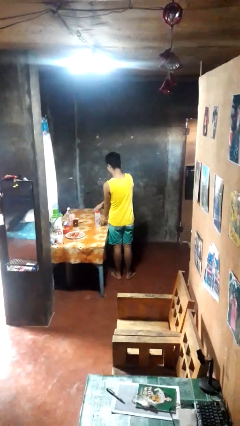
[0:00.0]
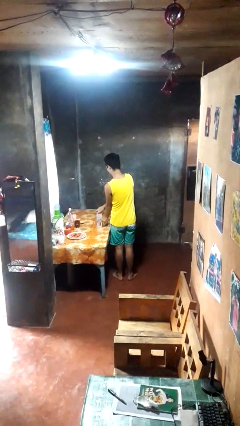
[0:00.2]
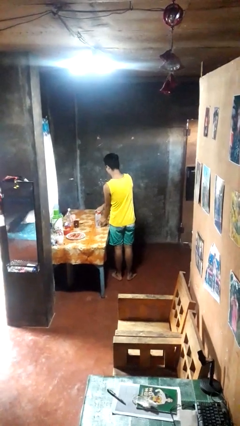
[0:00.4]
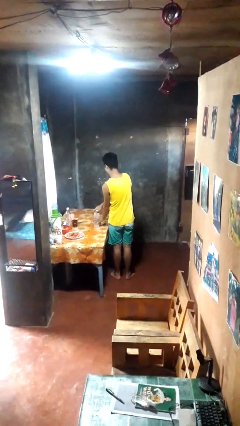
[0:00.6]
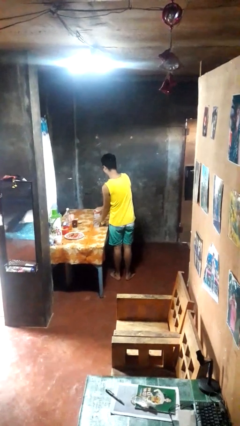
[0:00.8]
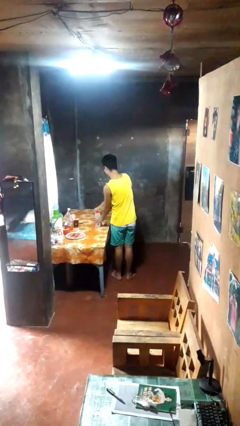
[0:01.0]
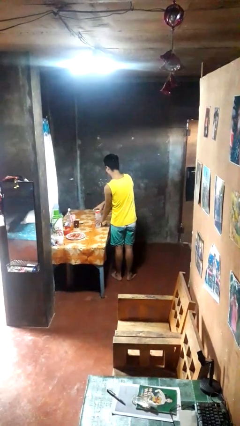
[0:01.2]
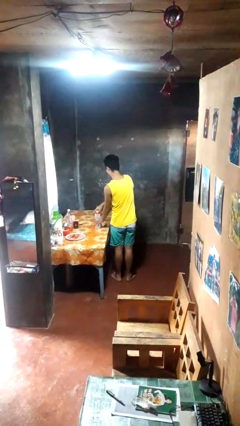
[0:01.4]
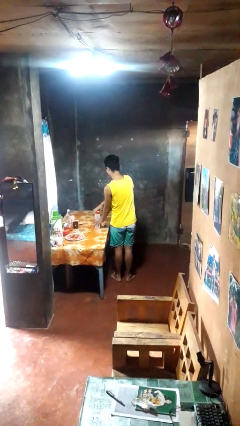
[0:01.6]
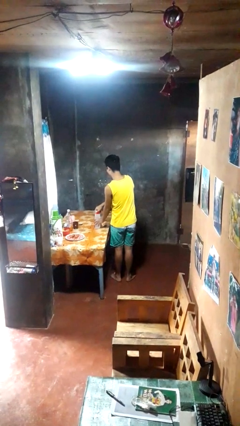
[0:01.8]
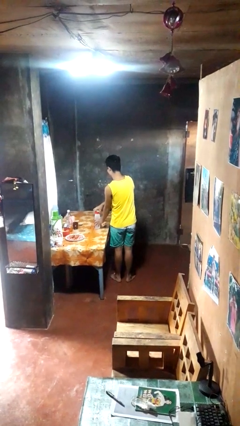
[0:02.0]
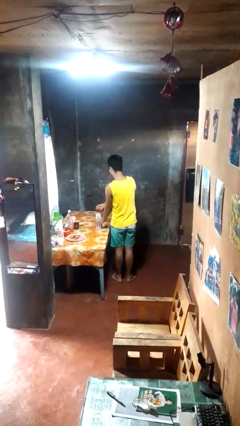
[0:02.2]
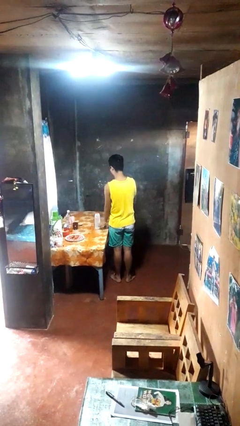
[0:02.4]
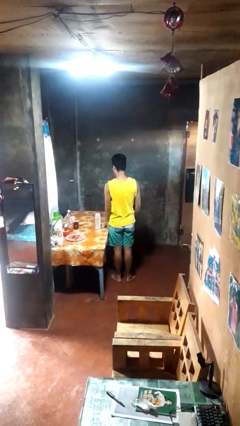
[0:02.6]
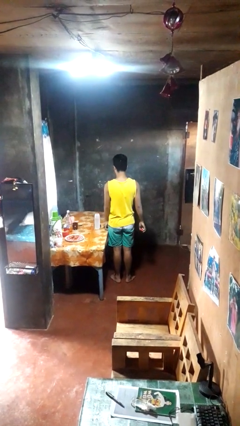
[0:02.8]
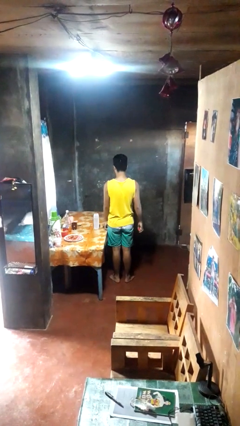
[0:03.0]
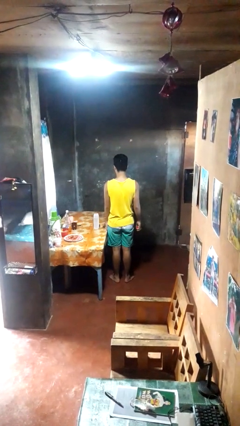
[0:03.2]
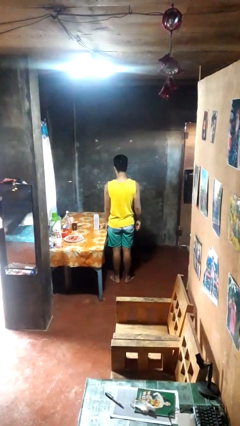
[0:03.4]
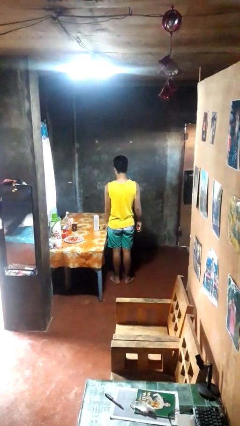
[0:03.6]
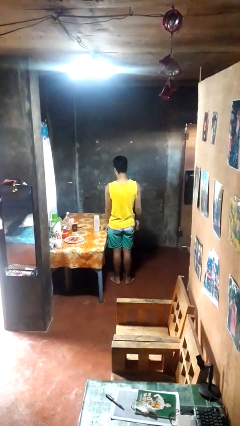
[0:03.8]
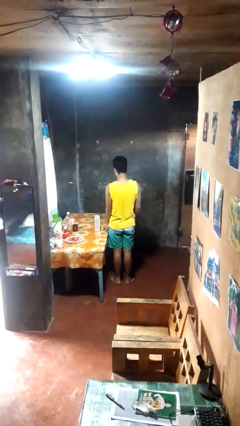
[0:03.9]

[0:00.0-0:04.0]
person opens jar

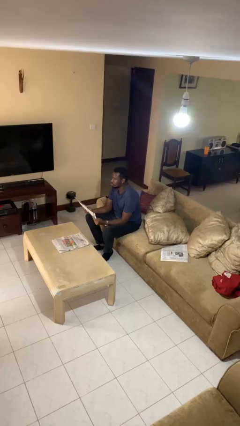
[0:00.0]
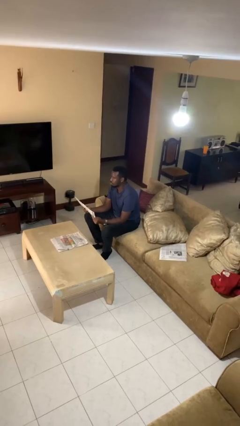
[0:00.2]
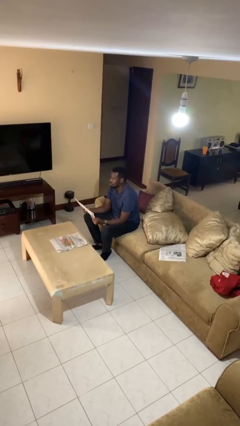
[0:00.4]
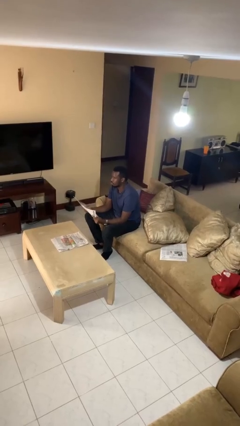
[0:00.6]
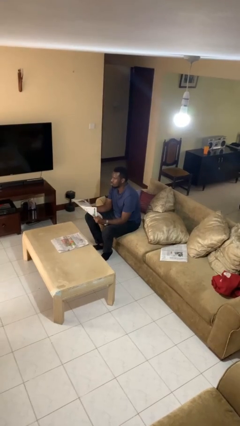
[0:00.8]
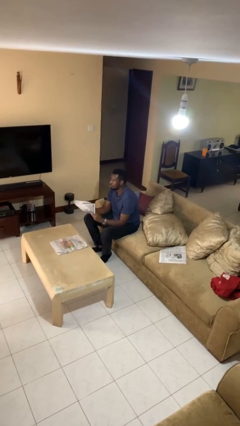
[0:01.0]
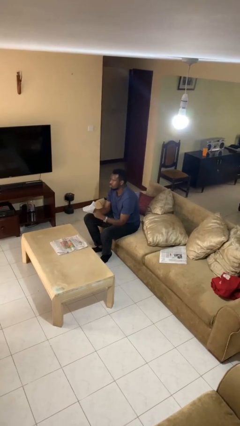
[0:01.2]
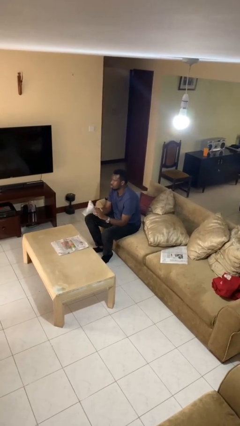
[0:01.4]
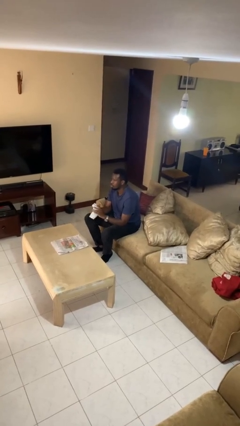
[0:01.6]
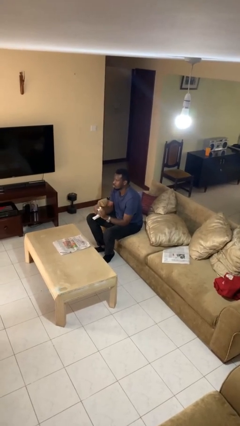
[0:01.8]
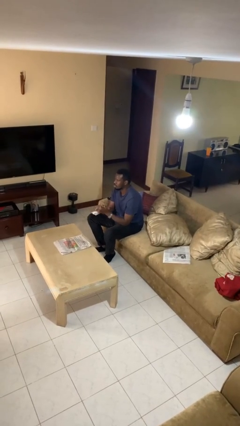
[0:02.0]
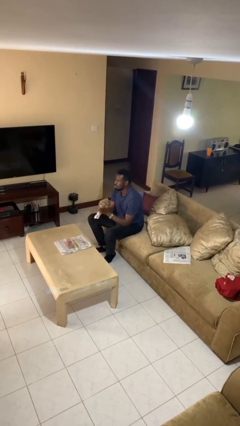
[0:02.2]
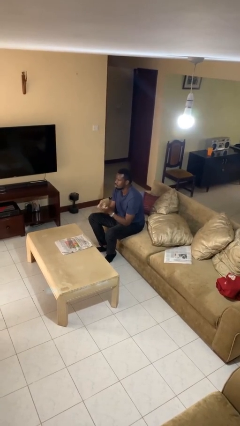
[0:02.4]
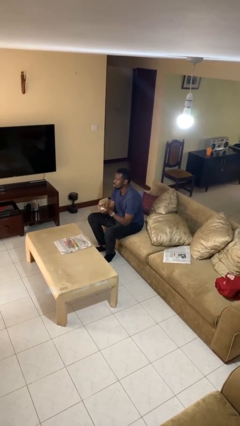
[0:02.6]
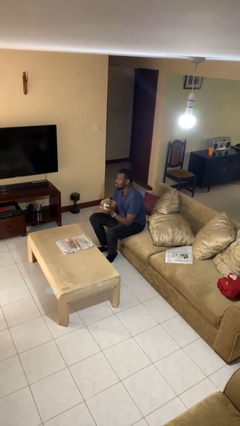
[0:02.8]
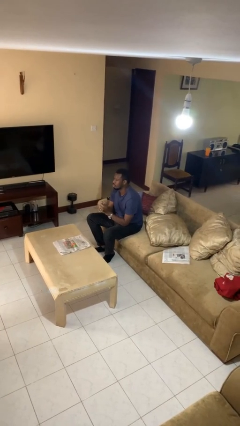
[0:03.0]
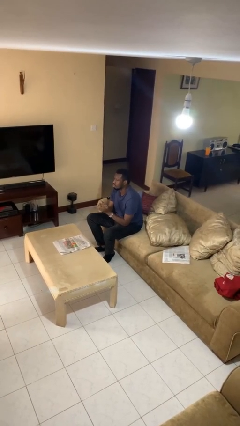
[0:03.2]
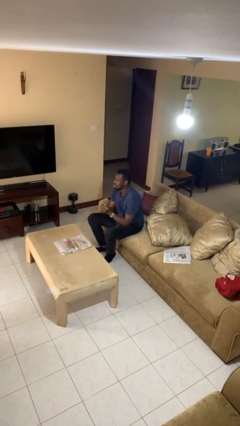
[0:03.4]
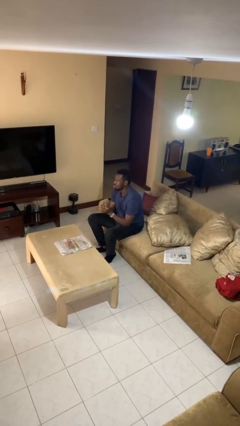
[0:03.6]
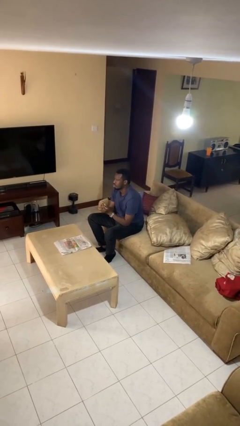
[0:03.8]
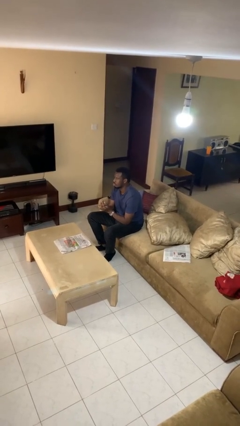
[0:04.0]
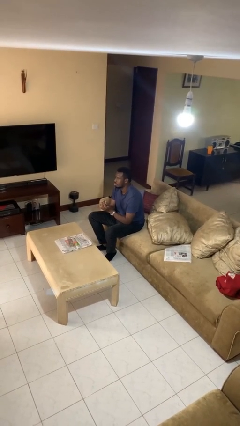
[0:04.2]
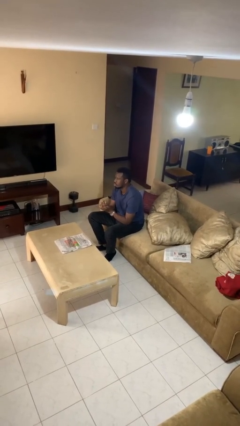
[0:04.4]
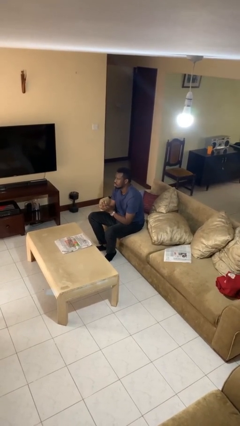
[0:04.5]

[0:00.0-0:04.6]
person crumples paper

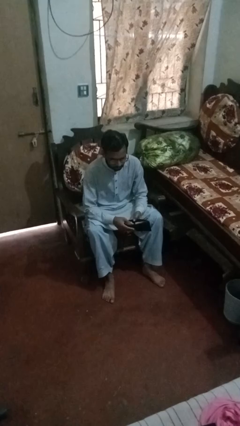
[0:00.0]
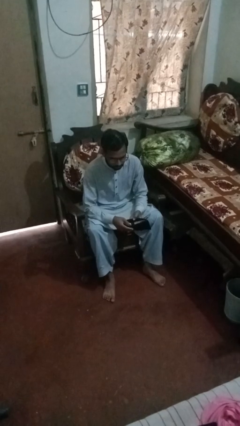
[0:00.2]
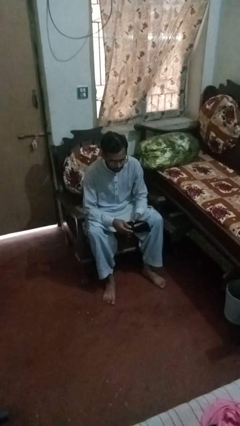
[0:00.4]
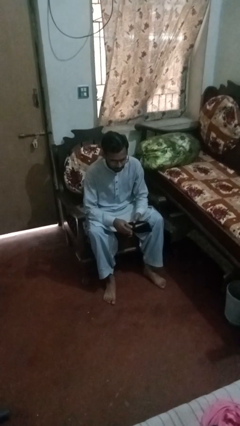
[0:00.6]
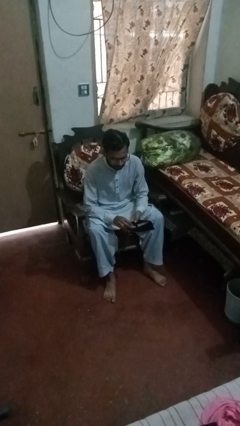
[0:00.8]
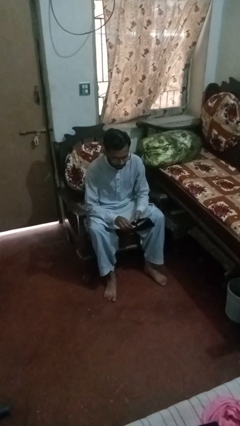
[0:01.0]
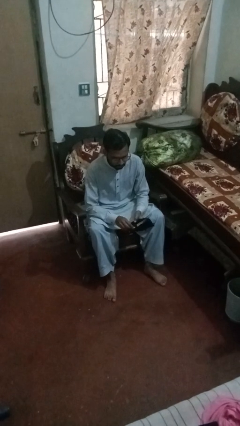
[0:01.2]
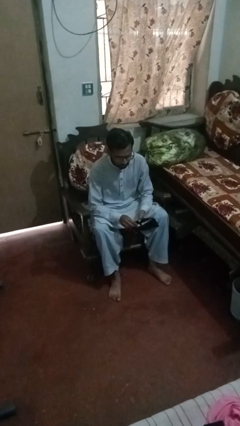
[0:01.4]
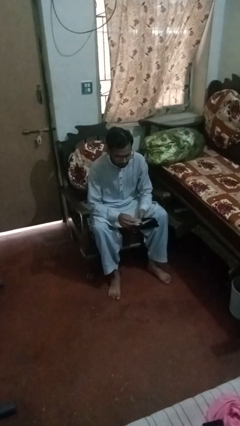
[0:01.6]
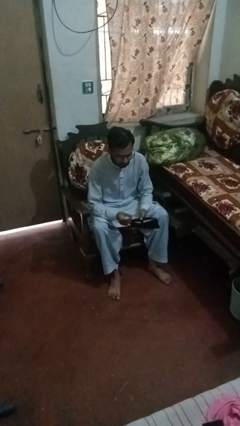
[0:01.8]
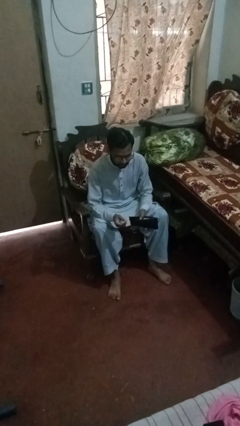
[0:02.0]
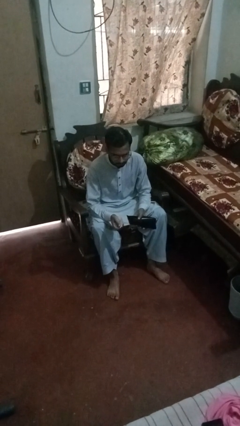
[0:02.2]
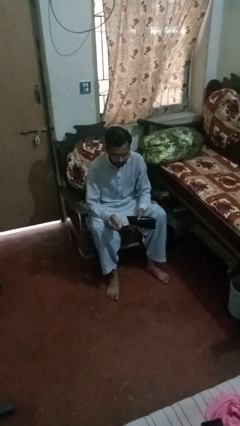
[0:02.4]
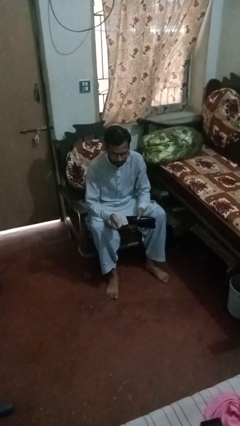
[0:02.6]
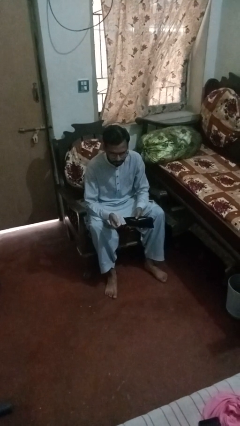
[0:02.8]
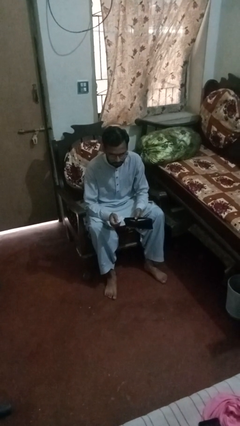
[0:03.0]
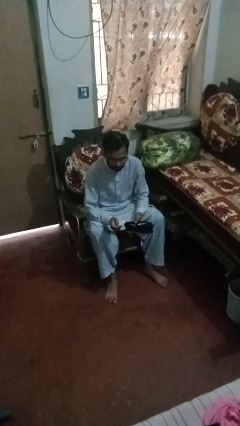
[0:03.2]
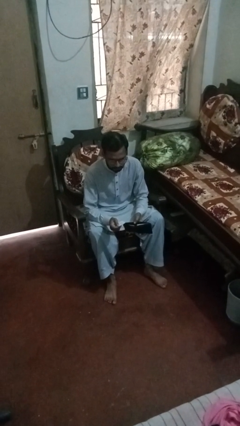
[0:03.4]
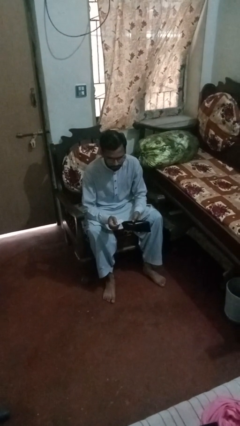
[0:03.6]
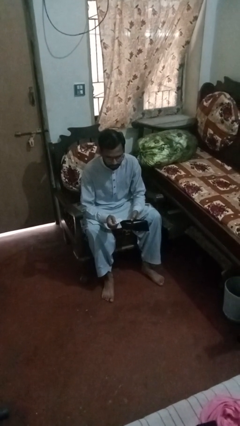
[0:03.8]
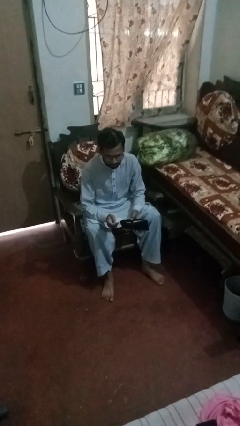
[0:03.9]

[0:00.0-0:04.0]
person takes object from purse

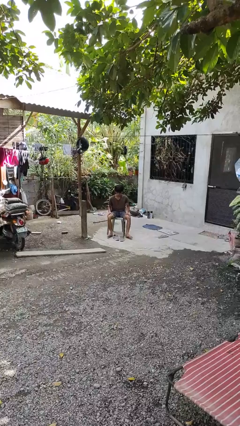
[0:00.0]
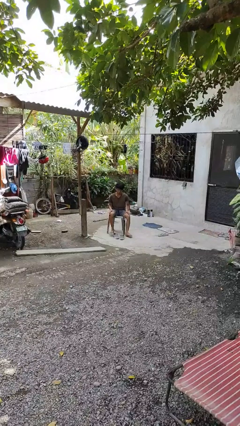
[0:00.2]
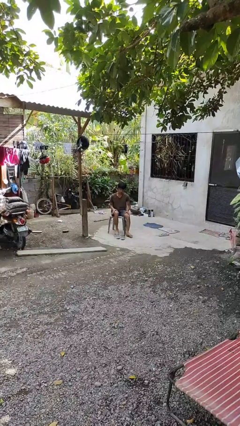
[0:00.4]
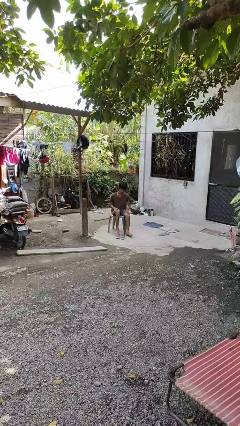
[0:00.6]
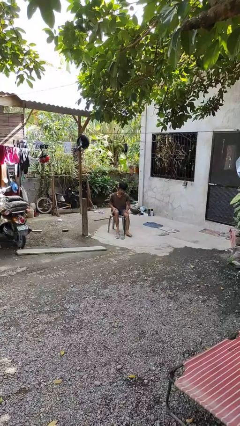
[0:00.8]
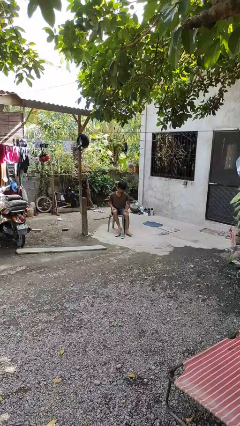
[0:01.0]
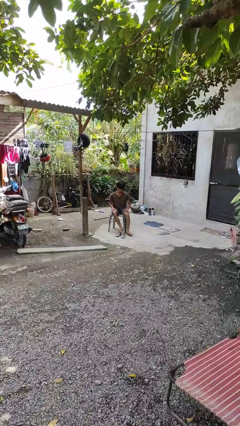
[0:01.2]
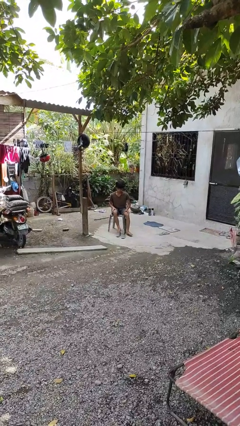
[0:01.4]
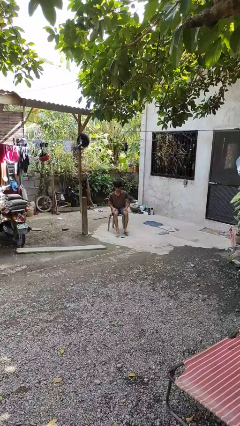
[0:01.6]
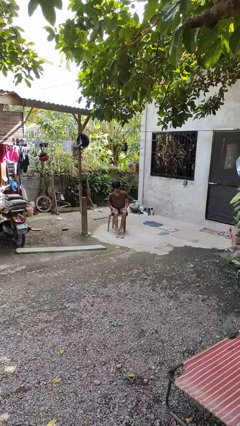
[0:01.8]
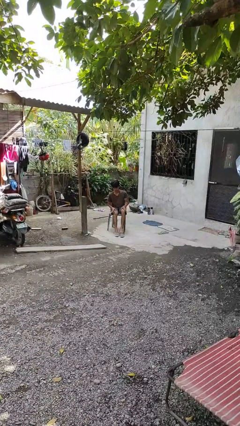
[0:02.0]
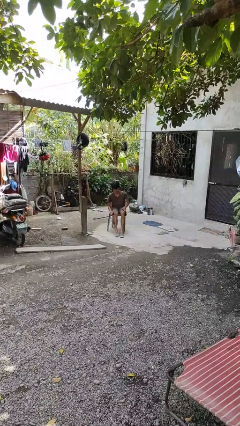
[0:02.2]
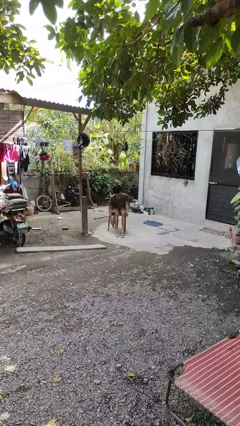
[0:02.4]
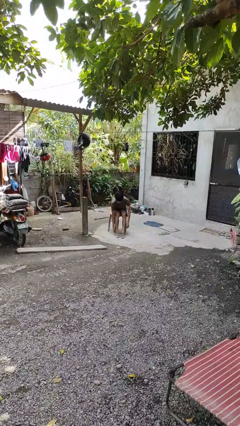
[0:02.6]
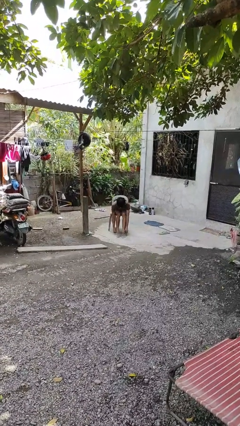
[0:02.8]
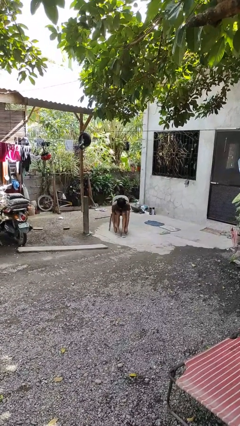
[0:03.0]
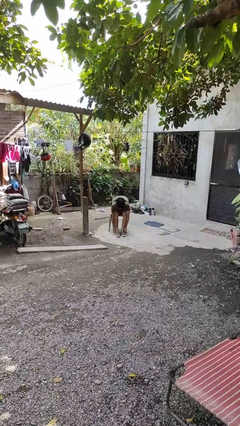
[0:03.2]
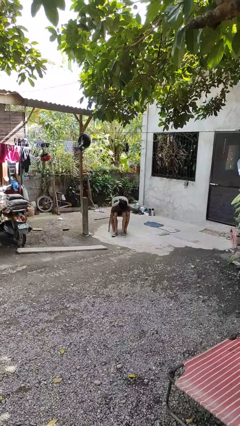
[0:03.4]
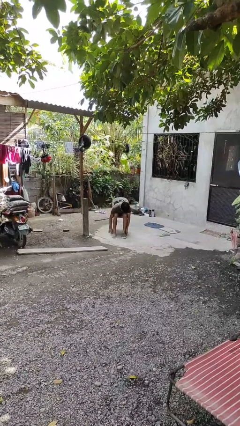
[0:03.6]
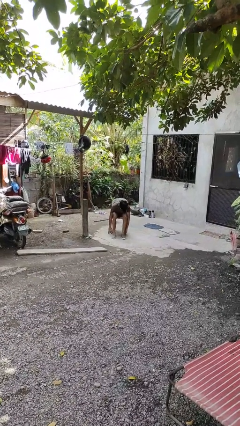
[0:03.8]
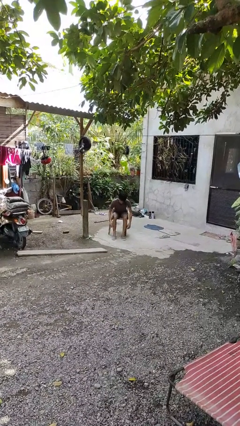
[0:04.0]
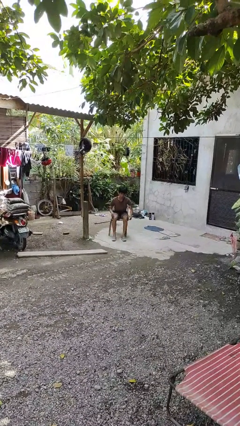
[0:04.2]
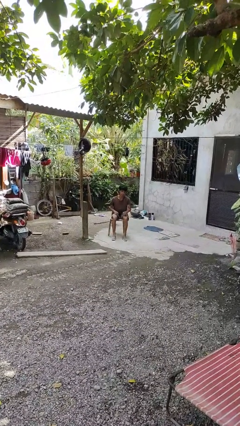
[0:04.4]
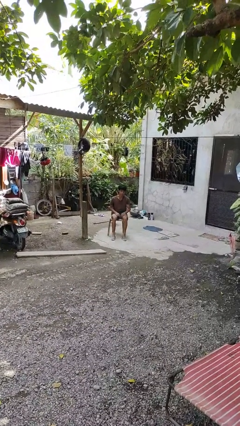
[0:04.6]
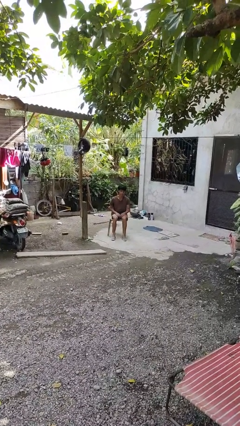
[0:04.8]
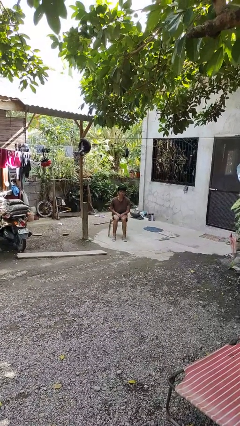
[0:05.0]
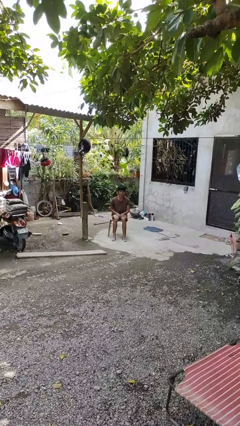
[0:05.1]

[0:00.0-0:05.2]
person puts on shoes
